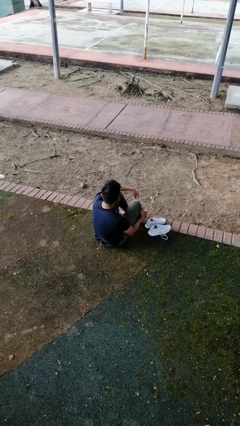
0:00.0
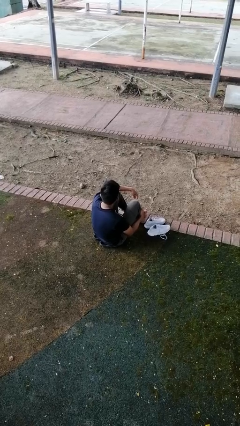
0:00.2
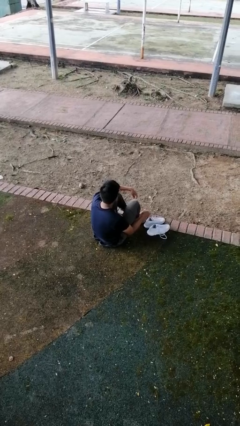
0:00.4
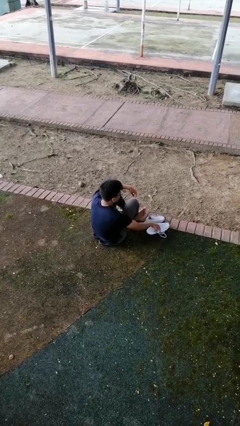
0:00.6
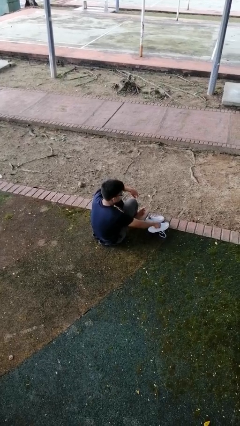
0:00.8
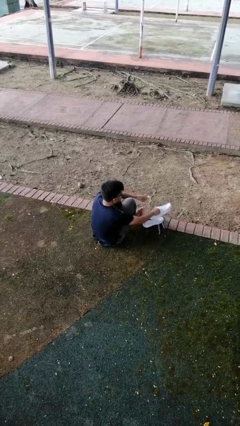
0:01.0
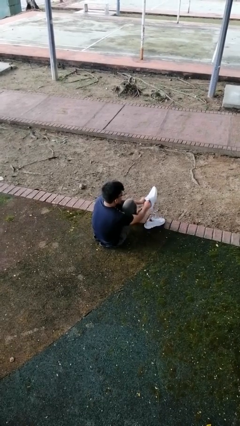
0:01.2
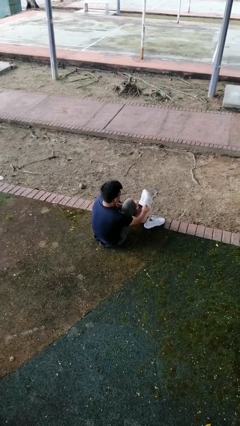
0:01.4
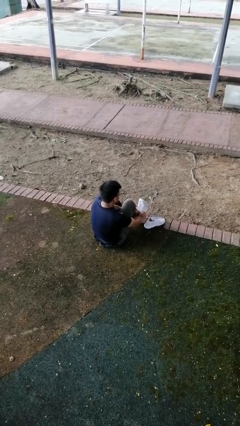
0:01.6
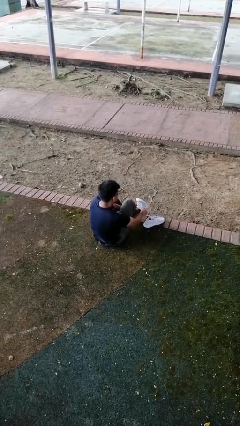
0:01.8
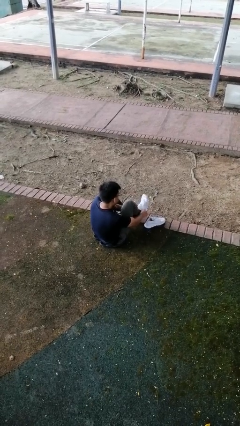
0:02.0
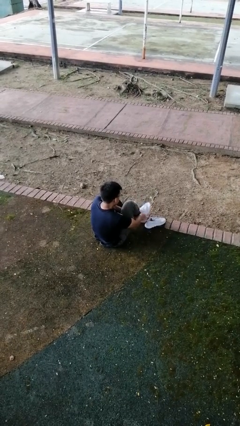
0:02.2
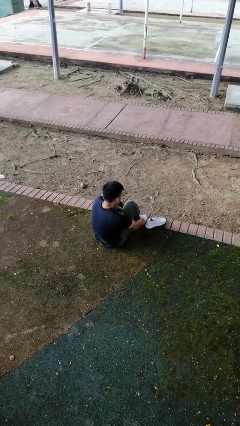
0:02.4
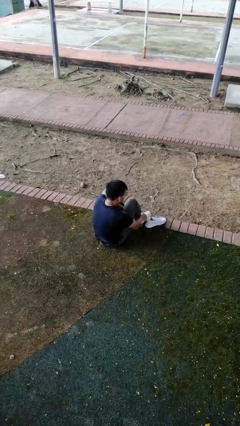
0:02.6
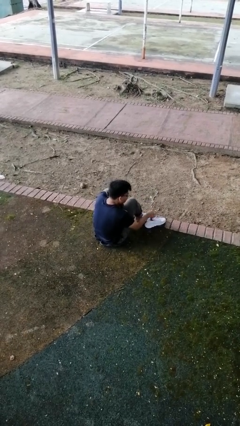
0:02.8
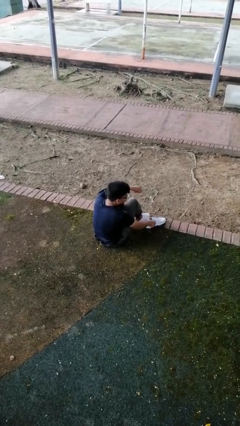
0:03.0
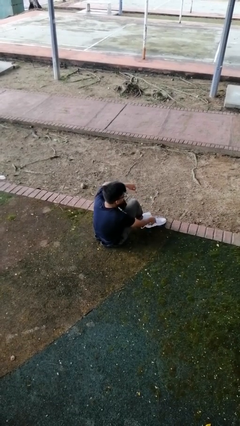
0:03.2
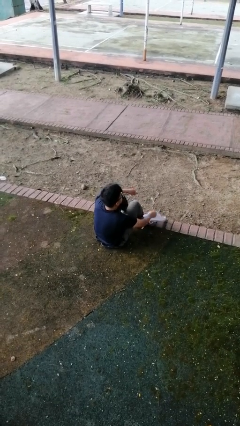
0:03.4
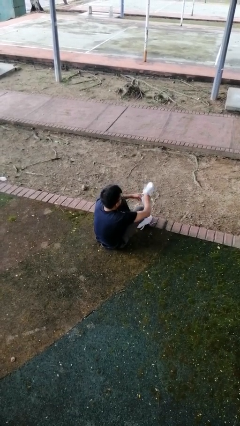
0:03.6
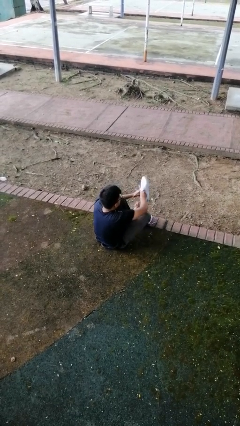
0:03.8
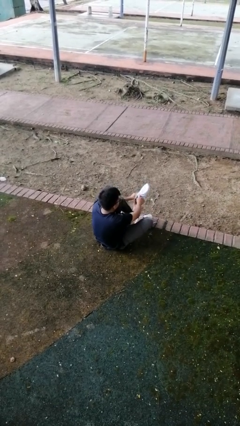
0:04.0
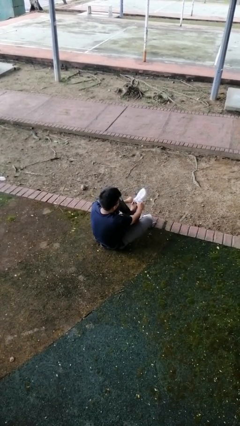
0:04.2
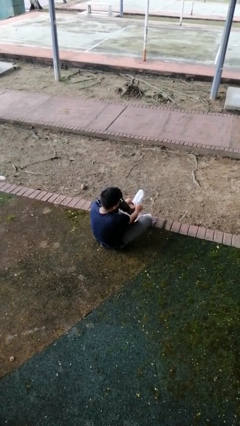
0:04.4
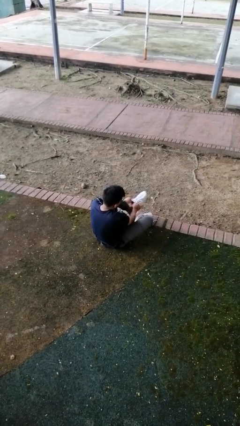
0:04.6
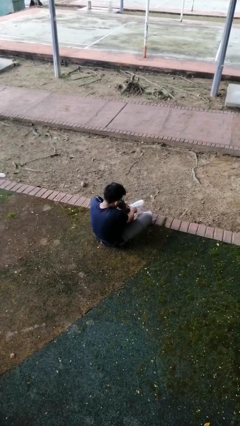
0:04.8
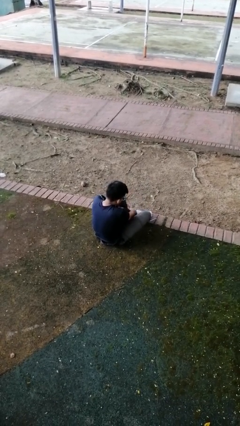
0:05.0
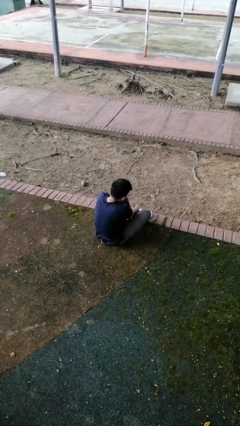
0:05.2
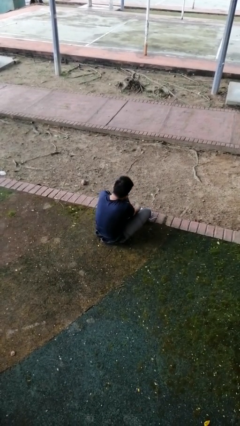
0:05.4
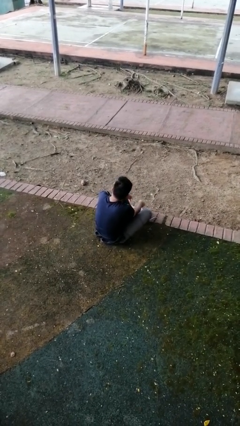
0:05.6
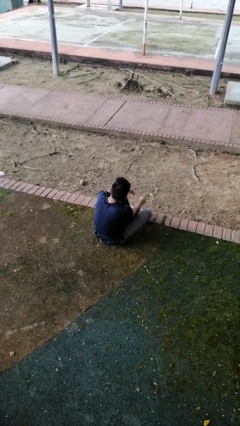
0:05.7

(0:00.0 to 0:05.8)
person puts on shoes

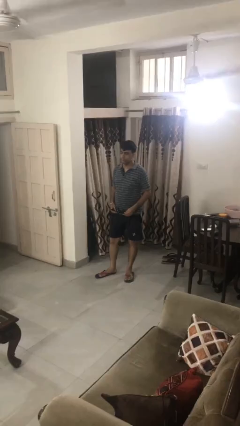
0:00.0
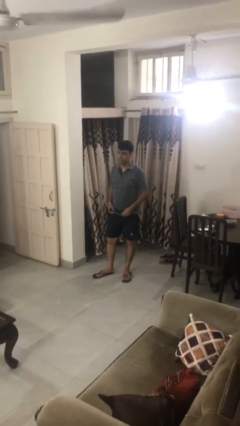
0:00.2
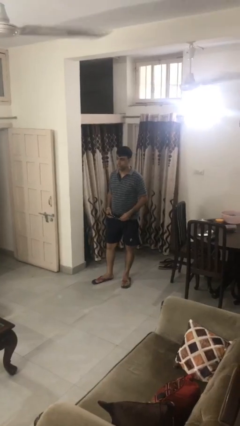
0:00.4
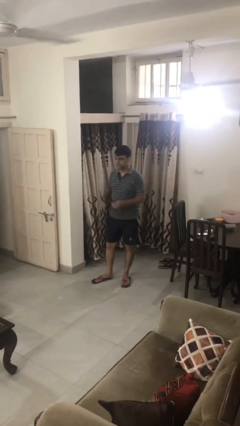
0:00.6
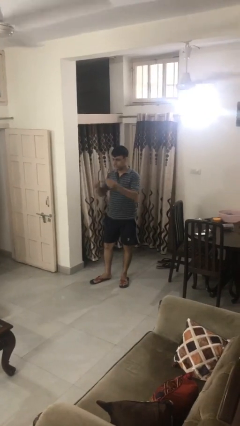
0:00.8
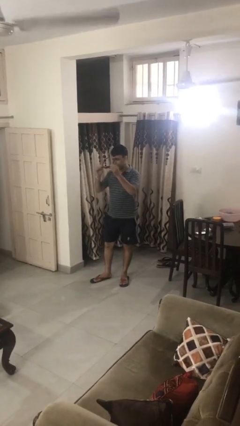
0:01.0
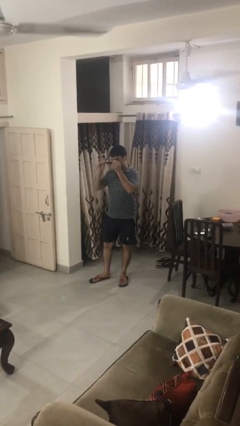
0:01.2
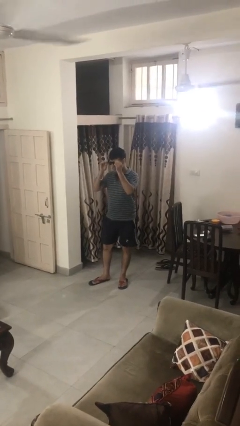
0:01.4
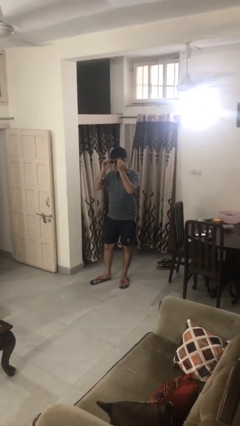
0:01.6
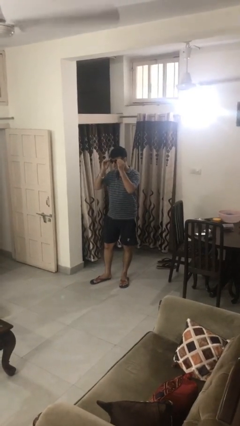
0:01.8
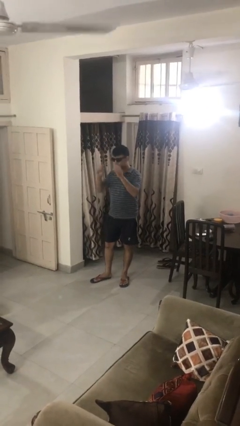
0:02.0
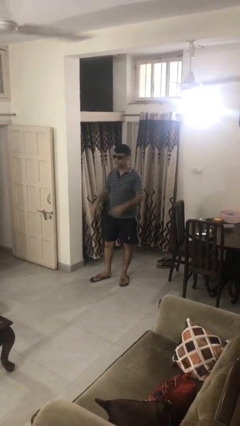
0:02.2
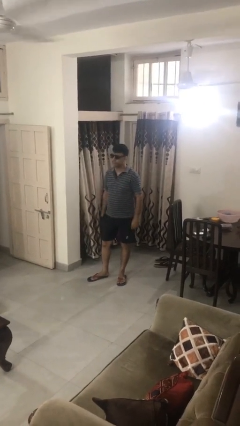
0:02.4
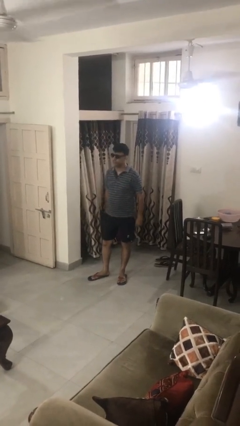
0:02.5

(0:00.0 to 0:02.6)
person puts on sunglasses

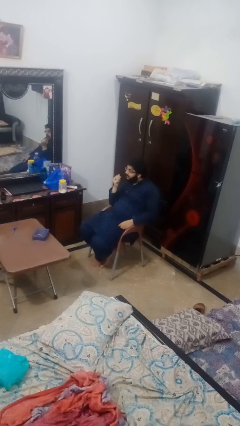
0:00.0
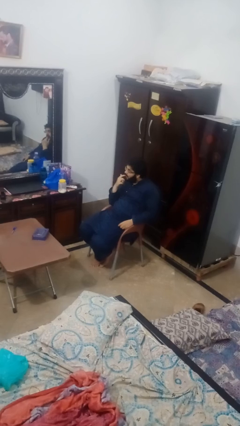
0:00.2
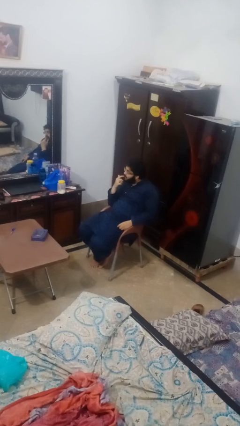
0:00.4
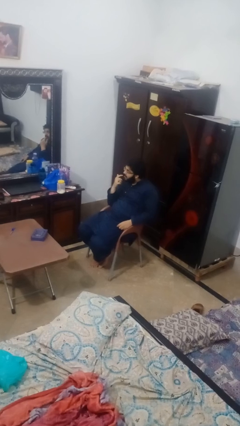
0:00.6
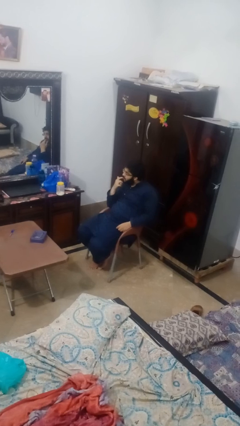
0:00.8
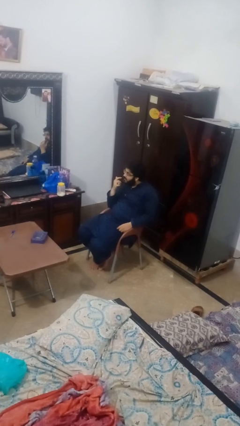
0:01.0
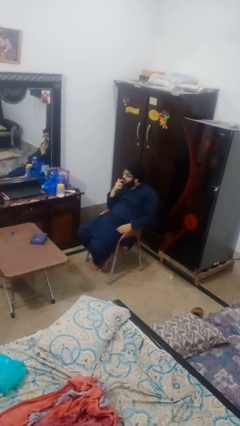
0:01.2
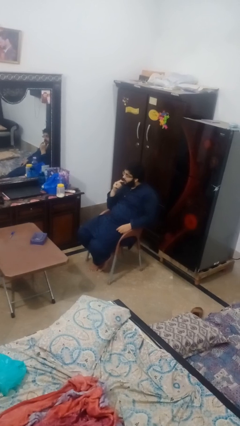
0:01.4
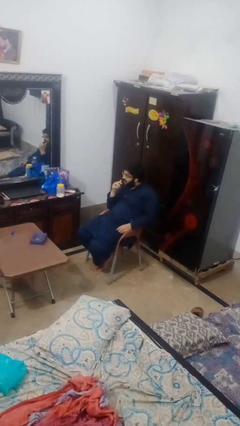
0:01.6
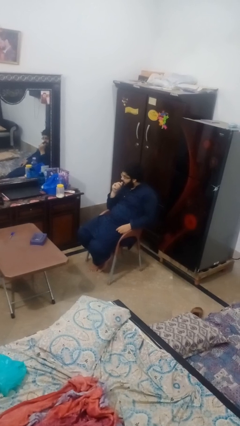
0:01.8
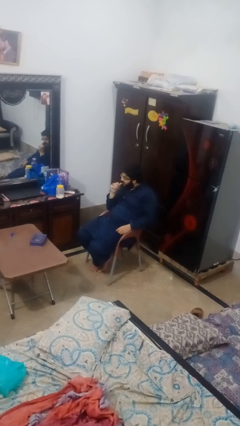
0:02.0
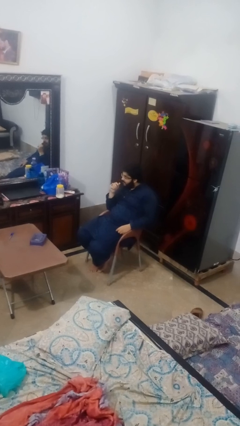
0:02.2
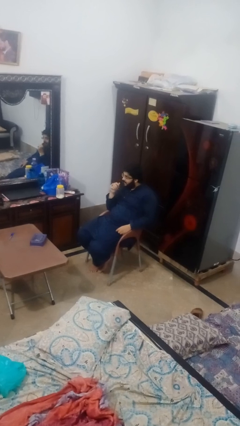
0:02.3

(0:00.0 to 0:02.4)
person licks fingers

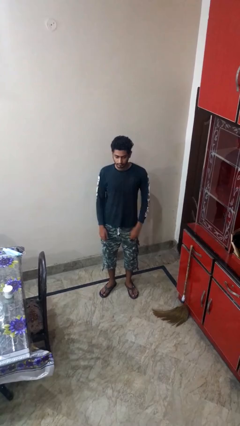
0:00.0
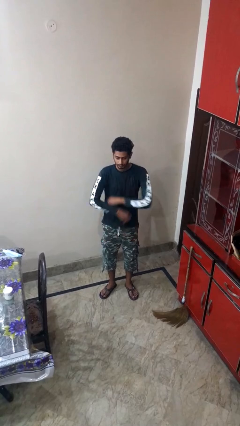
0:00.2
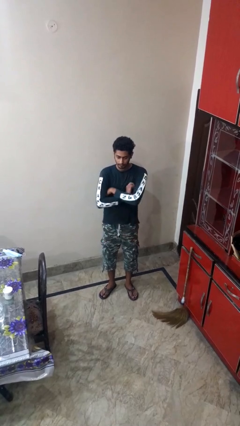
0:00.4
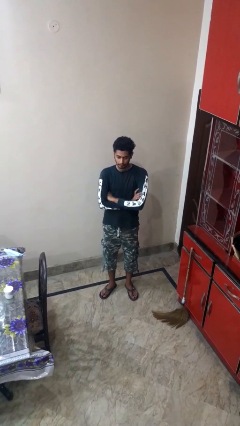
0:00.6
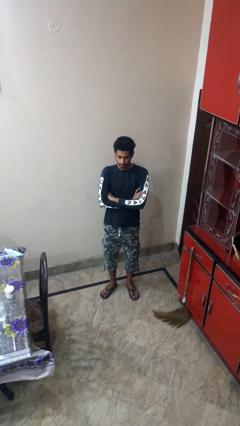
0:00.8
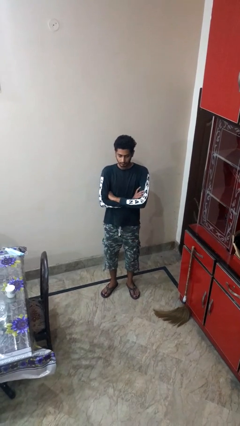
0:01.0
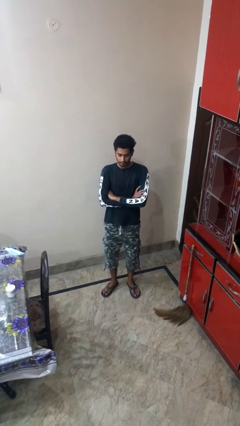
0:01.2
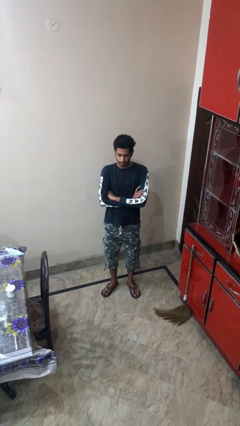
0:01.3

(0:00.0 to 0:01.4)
person crosses arms

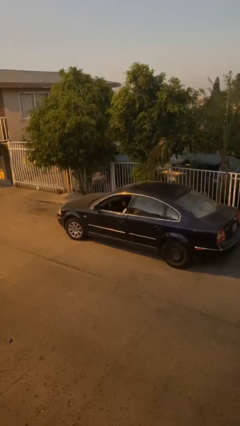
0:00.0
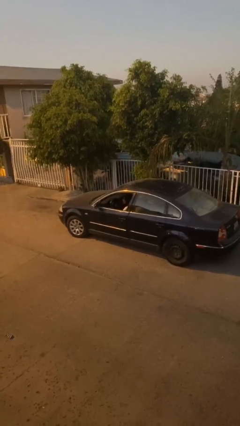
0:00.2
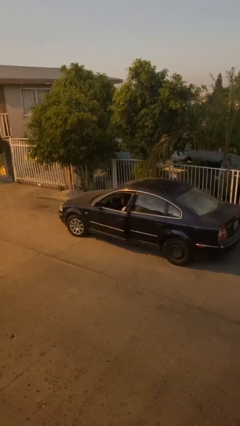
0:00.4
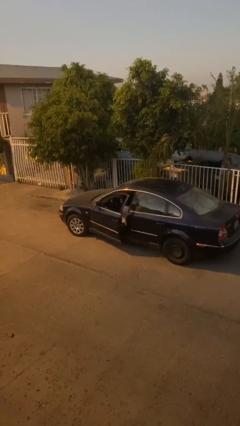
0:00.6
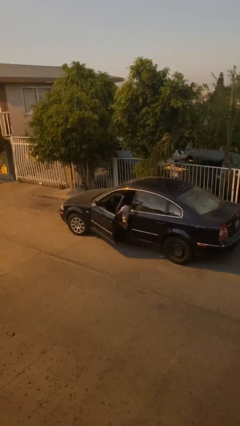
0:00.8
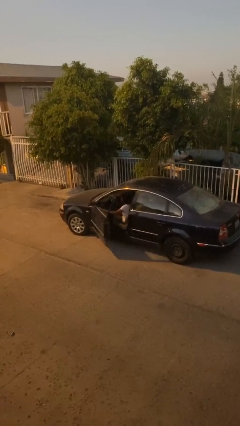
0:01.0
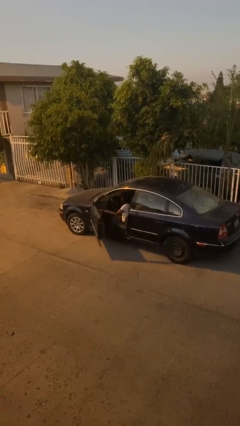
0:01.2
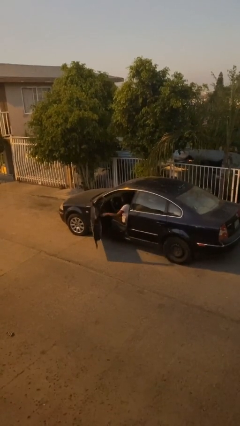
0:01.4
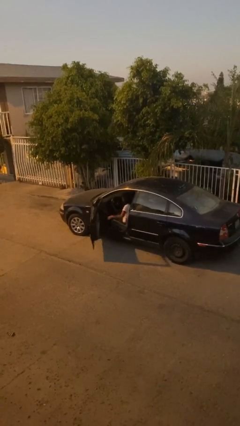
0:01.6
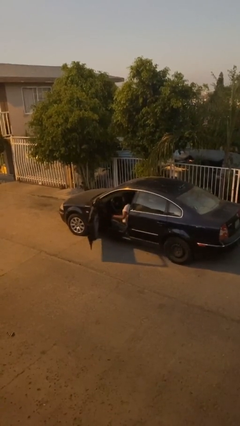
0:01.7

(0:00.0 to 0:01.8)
person opens car door

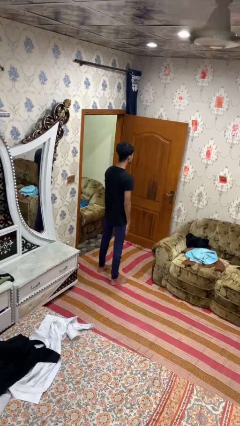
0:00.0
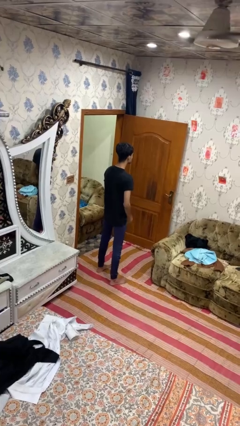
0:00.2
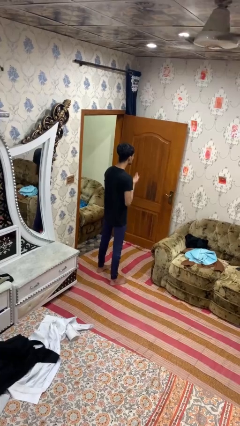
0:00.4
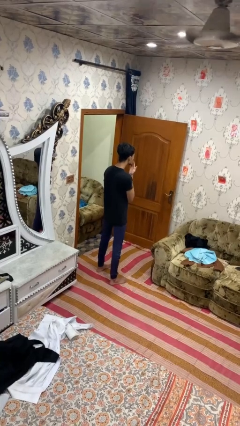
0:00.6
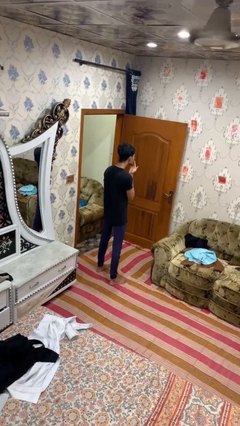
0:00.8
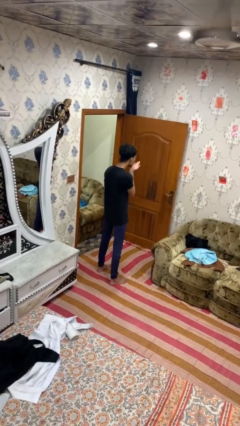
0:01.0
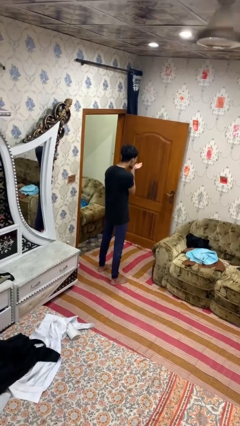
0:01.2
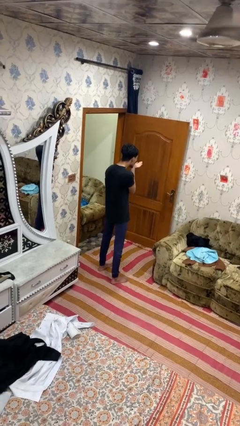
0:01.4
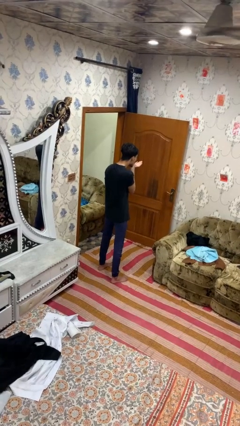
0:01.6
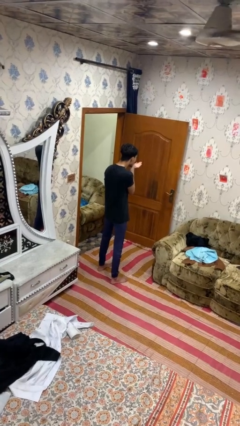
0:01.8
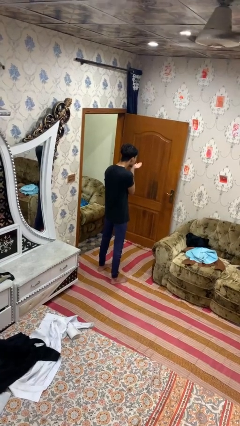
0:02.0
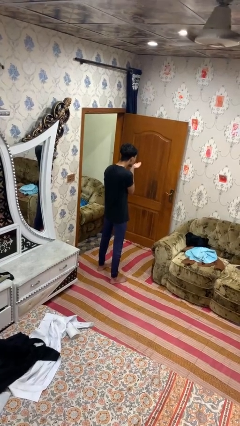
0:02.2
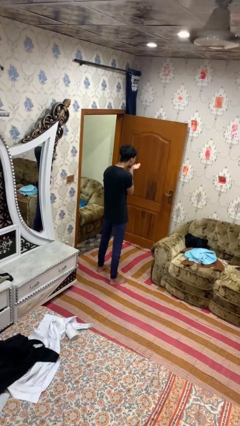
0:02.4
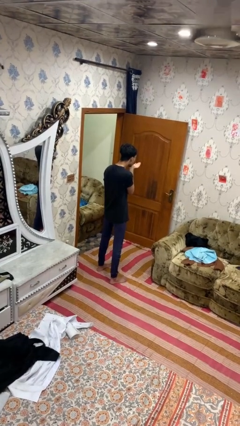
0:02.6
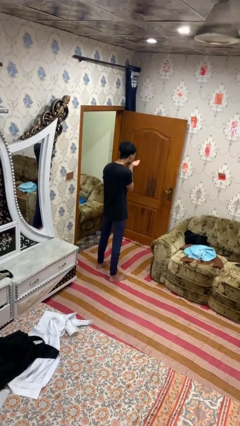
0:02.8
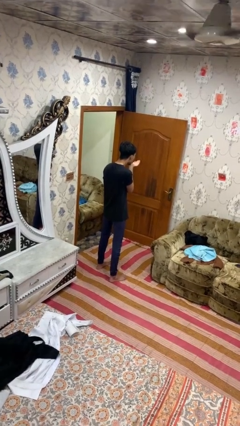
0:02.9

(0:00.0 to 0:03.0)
person gestures blow kiss

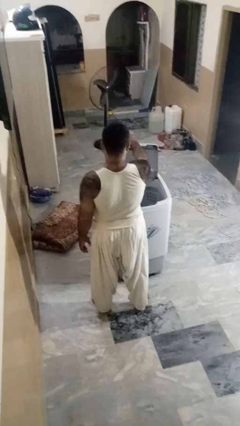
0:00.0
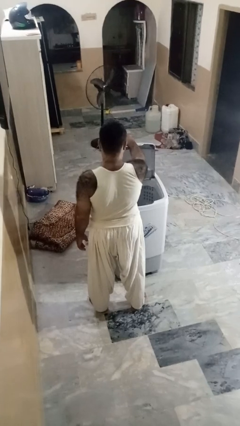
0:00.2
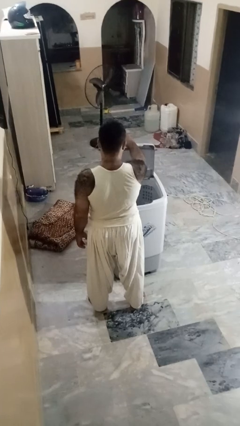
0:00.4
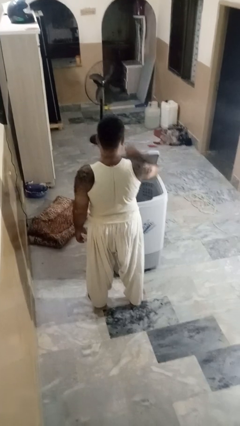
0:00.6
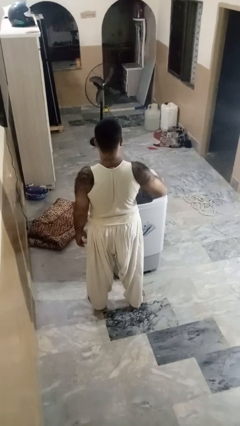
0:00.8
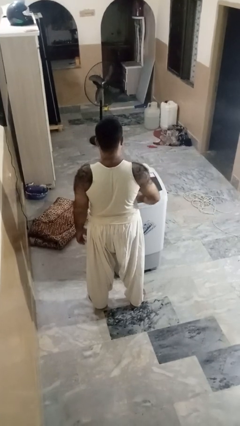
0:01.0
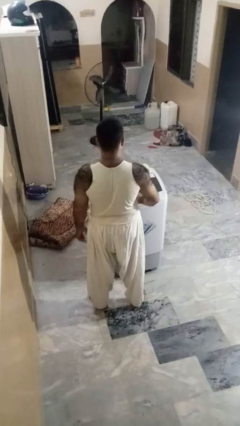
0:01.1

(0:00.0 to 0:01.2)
person closes clothes washer
